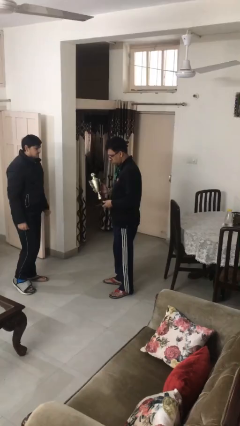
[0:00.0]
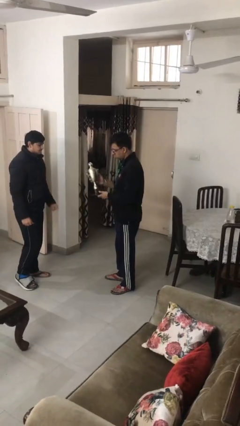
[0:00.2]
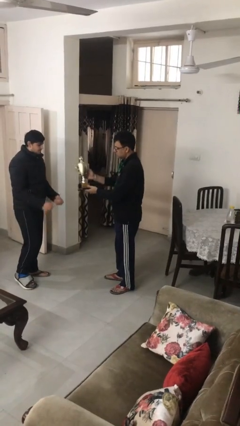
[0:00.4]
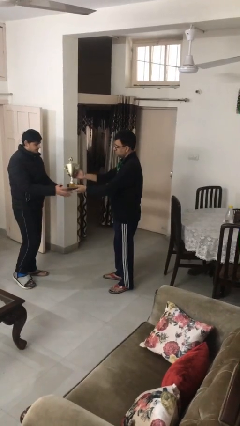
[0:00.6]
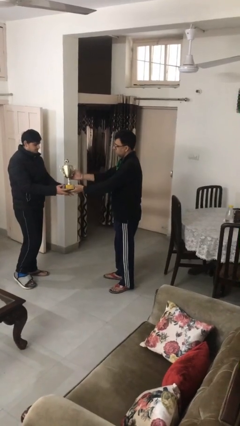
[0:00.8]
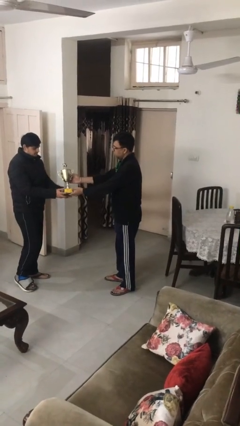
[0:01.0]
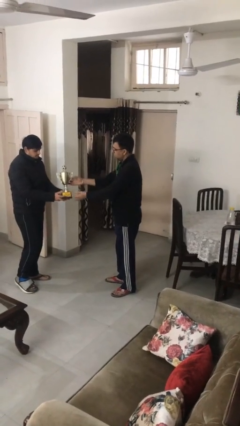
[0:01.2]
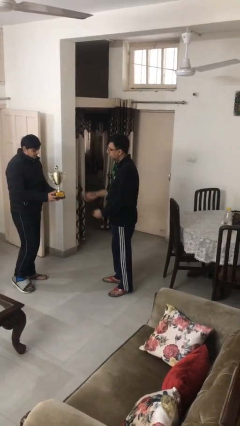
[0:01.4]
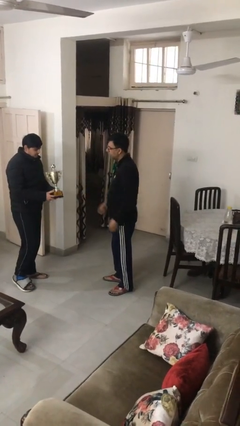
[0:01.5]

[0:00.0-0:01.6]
person transfers object to person

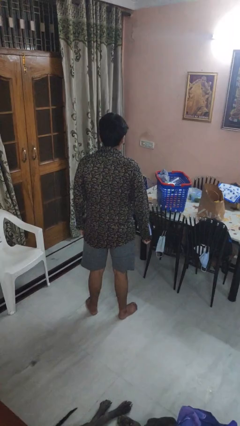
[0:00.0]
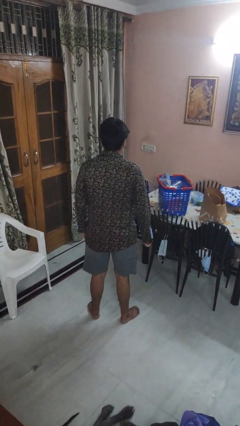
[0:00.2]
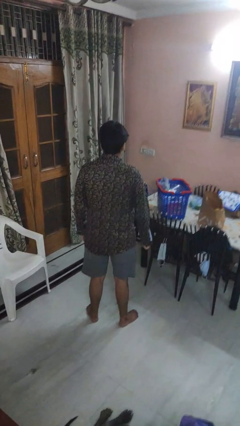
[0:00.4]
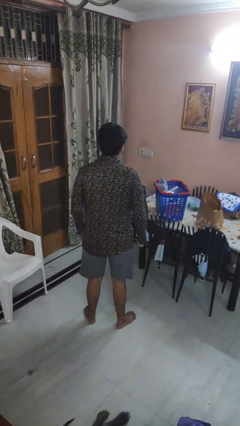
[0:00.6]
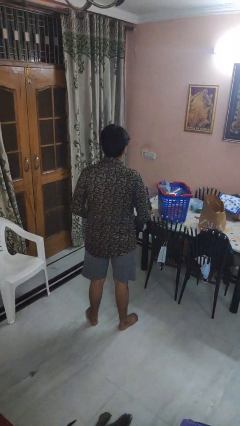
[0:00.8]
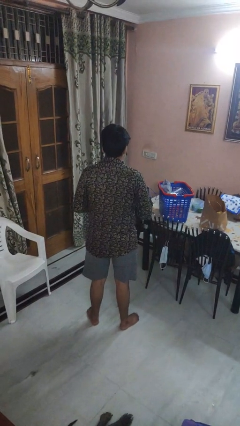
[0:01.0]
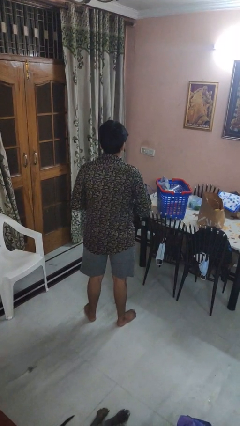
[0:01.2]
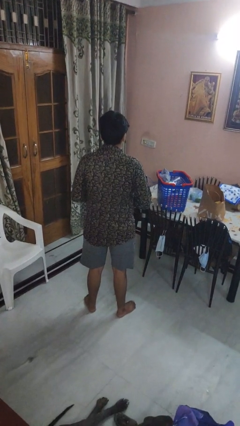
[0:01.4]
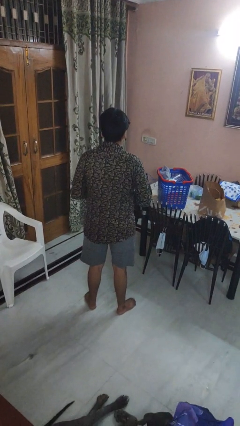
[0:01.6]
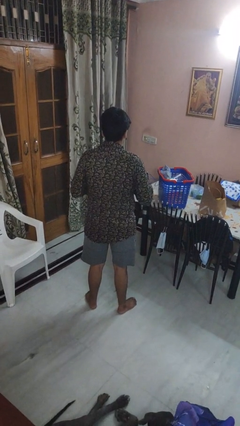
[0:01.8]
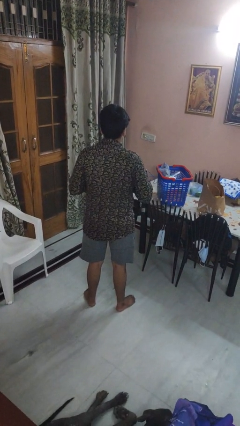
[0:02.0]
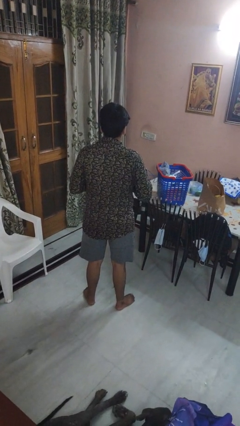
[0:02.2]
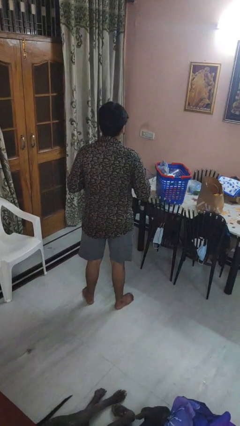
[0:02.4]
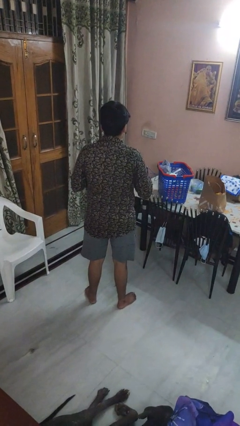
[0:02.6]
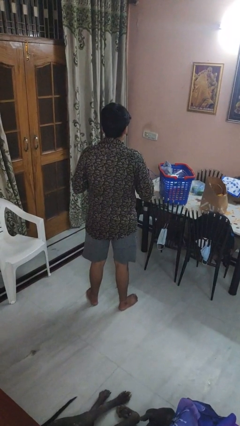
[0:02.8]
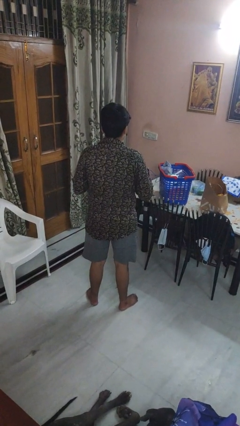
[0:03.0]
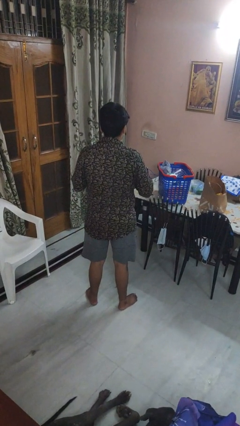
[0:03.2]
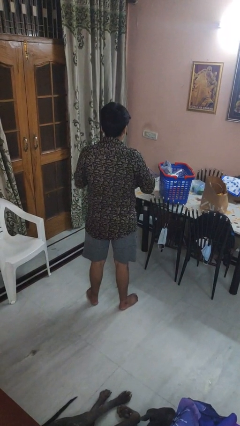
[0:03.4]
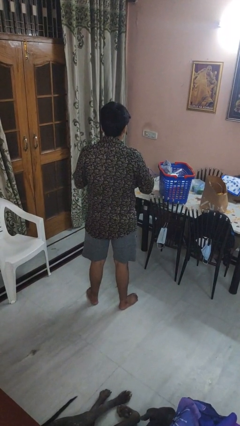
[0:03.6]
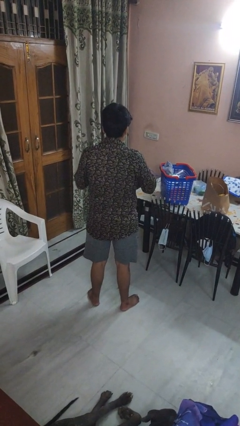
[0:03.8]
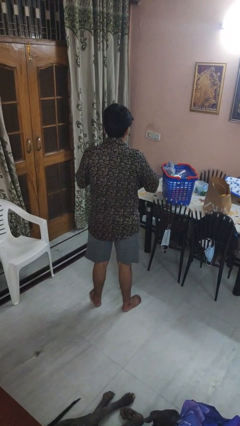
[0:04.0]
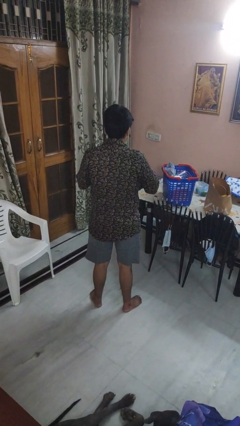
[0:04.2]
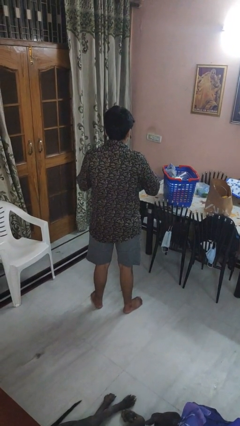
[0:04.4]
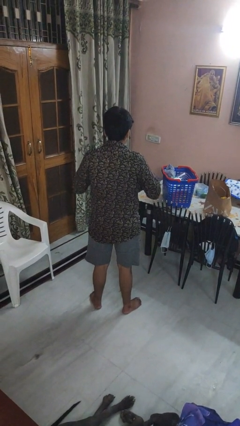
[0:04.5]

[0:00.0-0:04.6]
person unbuttons shirt

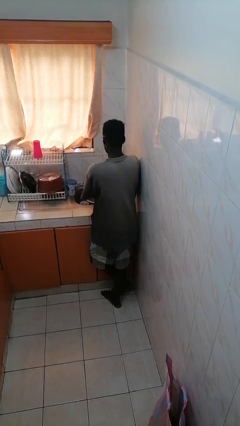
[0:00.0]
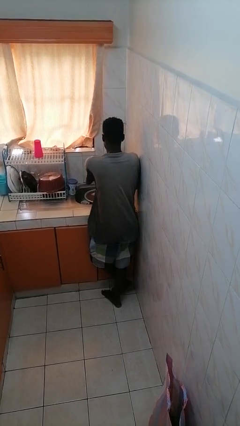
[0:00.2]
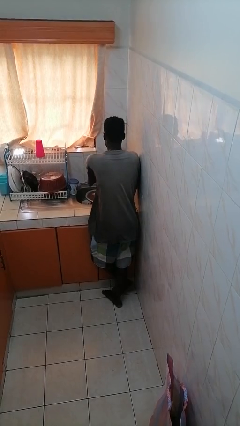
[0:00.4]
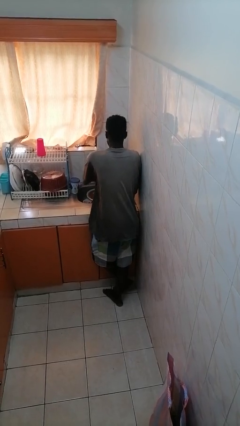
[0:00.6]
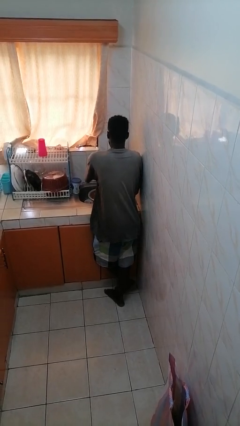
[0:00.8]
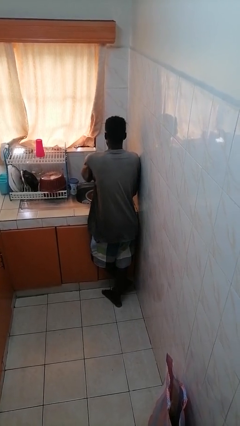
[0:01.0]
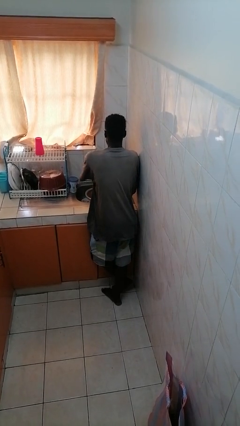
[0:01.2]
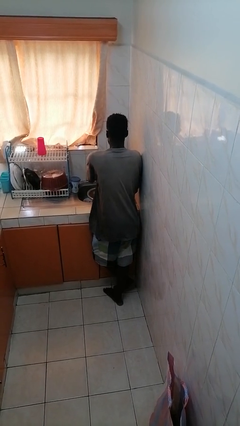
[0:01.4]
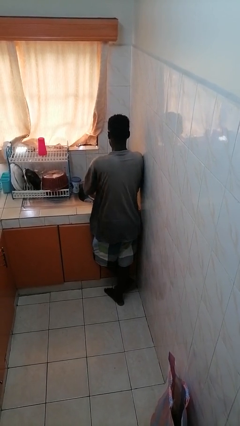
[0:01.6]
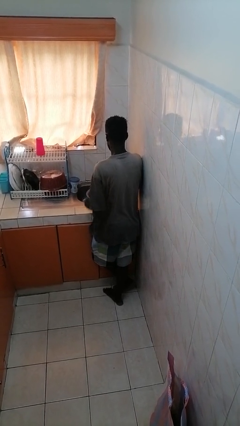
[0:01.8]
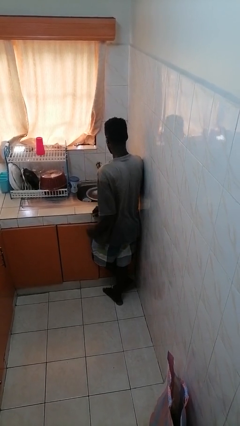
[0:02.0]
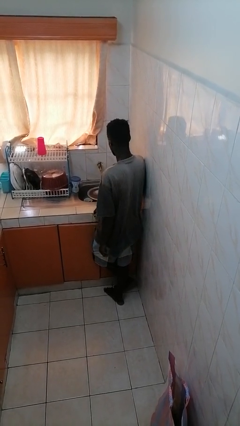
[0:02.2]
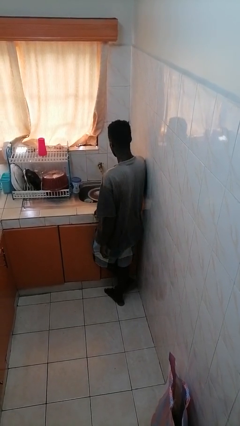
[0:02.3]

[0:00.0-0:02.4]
person turns off faucet

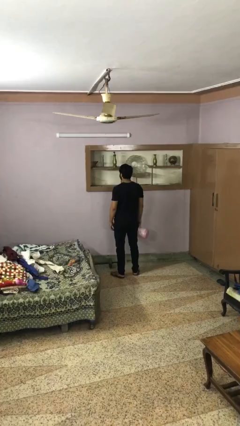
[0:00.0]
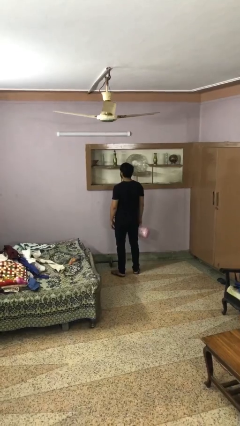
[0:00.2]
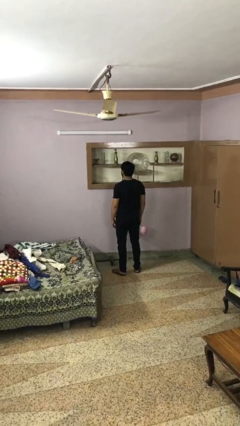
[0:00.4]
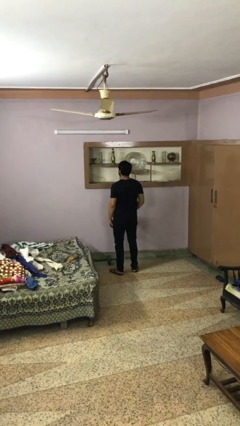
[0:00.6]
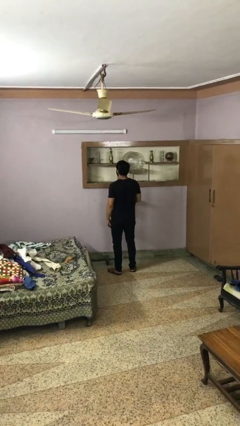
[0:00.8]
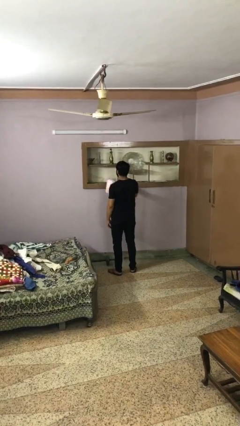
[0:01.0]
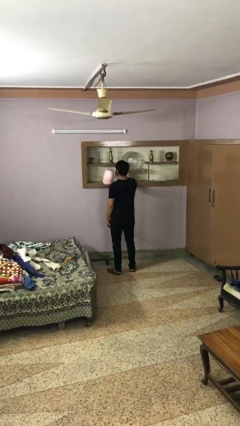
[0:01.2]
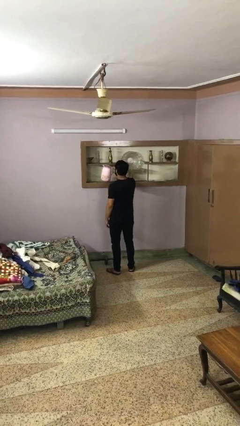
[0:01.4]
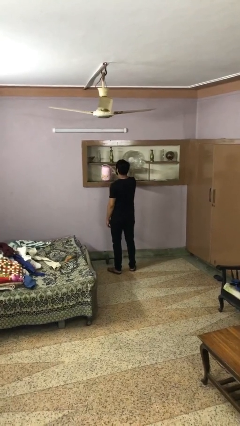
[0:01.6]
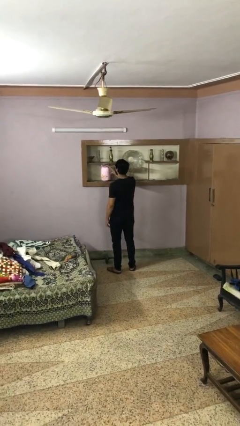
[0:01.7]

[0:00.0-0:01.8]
person puts down object on countertop

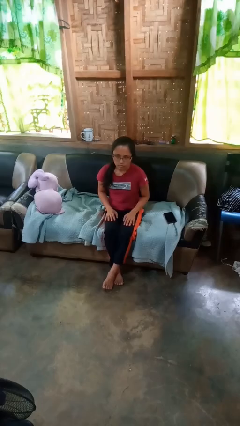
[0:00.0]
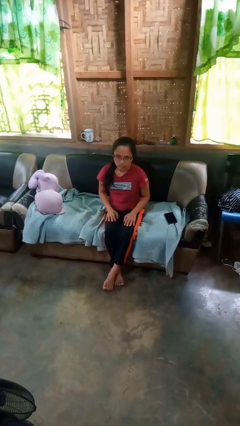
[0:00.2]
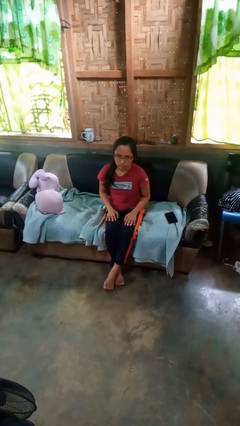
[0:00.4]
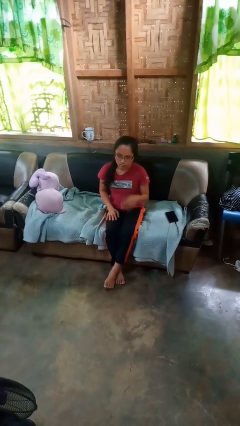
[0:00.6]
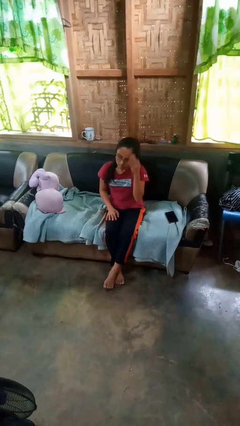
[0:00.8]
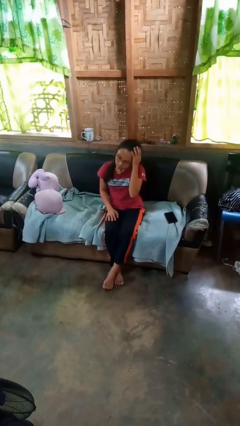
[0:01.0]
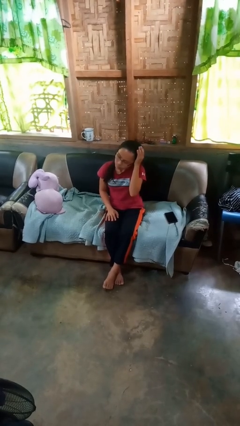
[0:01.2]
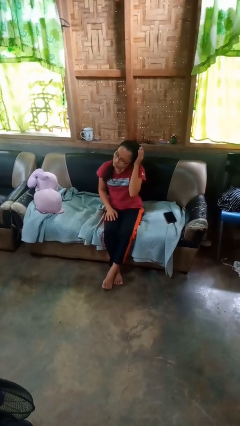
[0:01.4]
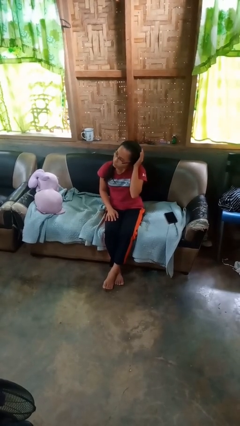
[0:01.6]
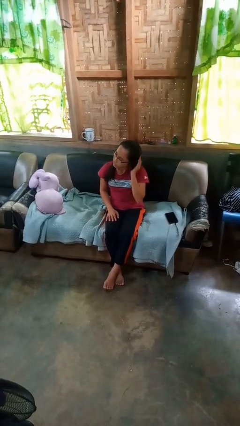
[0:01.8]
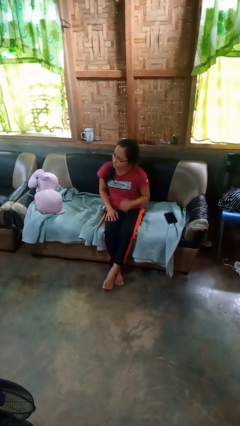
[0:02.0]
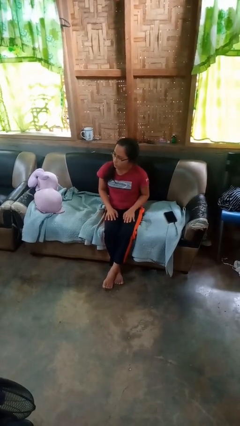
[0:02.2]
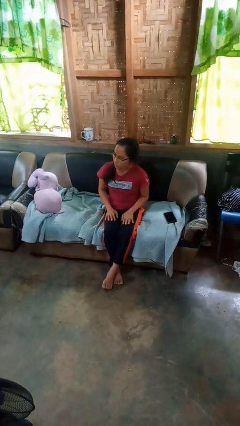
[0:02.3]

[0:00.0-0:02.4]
person strokes hair

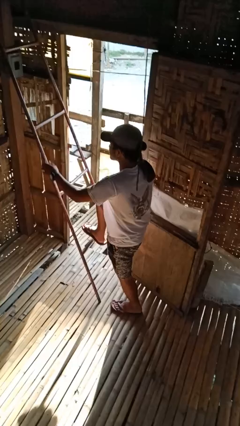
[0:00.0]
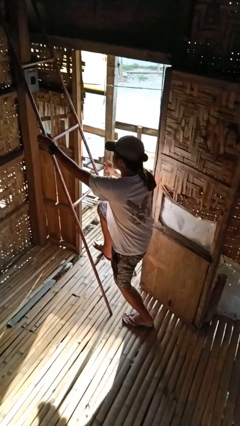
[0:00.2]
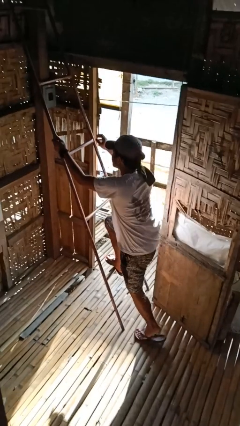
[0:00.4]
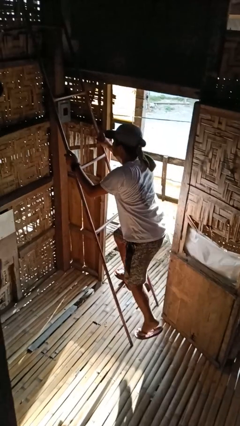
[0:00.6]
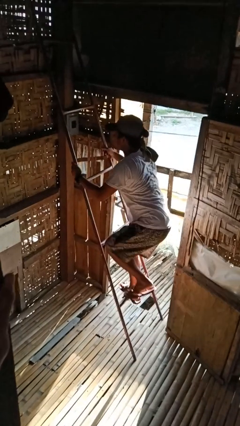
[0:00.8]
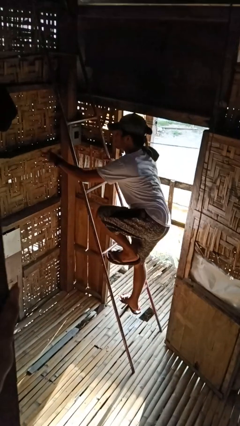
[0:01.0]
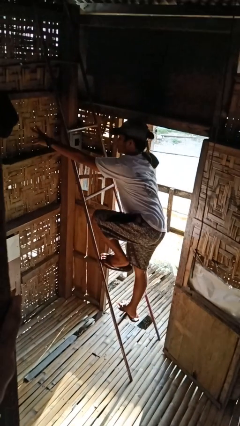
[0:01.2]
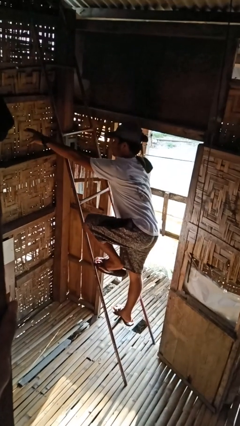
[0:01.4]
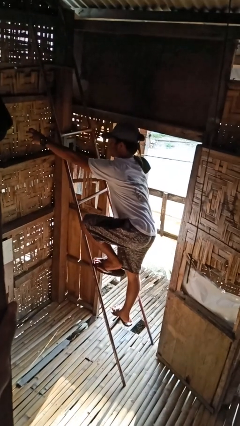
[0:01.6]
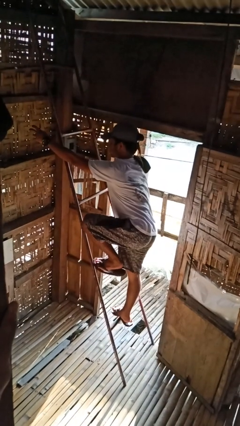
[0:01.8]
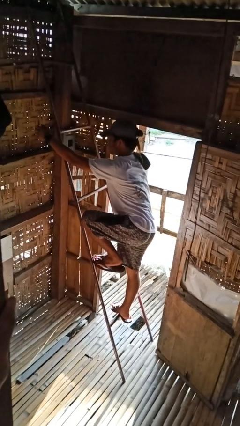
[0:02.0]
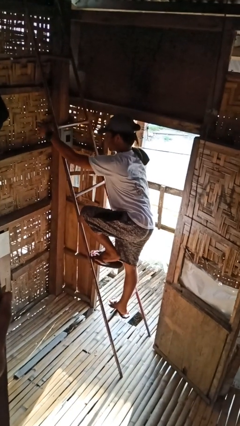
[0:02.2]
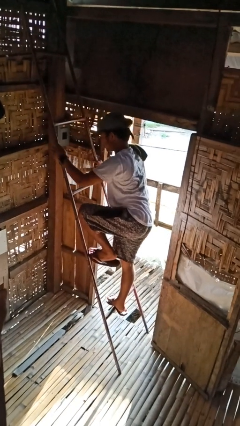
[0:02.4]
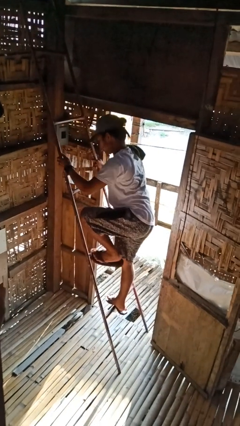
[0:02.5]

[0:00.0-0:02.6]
person climbs up ladder

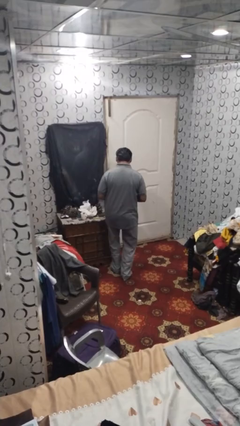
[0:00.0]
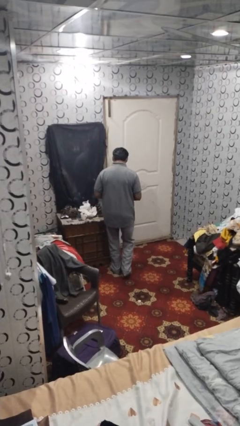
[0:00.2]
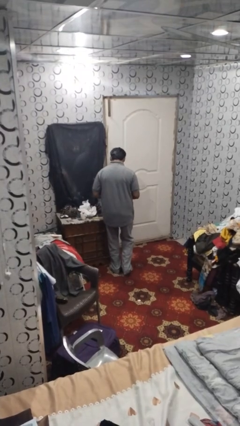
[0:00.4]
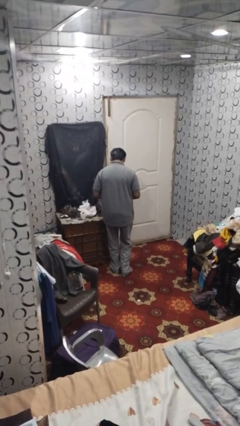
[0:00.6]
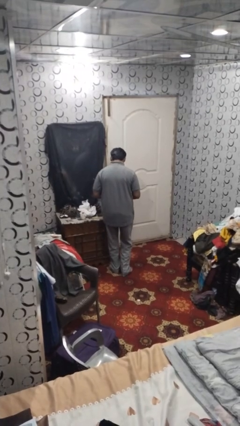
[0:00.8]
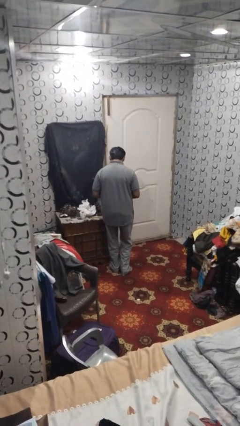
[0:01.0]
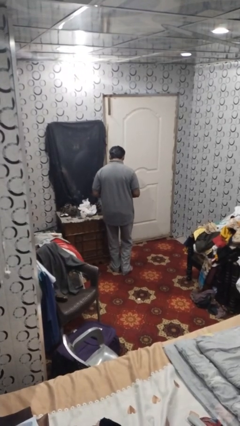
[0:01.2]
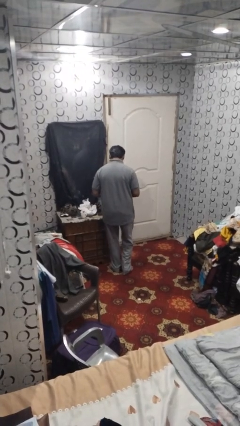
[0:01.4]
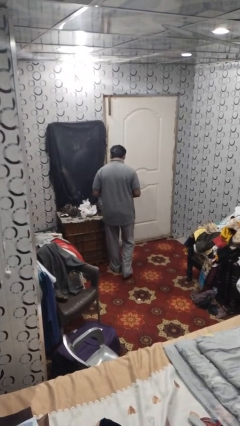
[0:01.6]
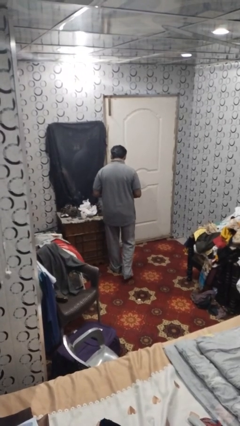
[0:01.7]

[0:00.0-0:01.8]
person bumps into table
